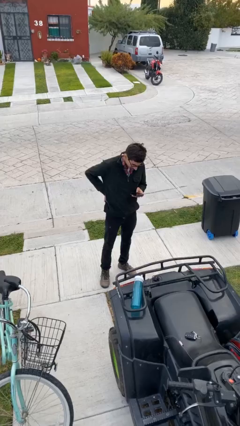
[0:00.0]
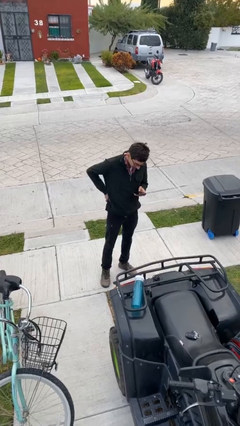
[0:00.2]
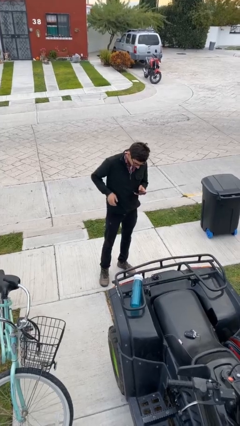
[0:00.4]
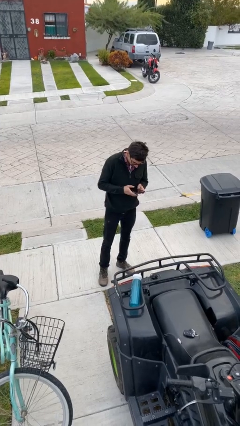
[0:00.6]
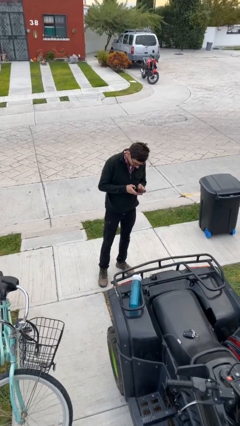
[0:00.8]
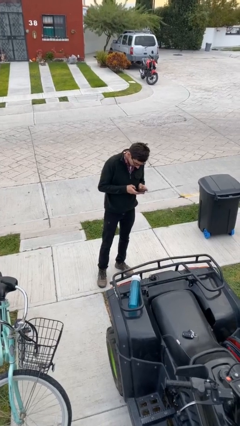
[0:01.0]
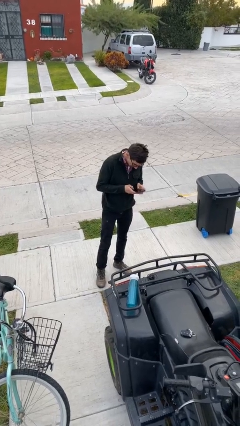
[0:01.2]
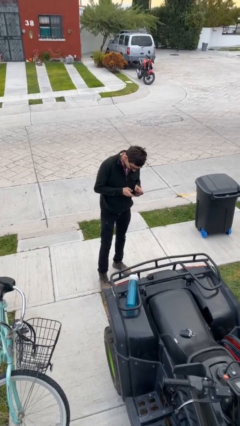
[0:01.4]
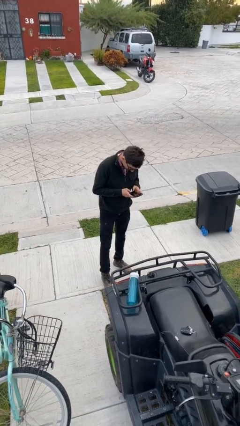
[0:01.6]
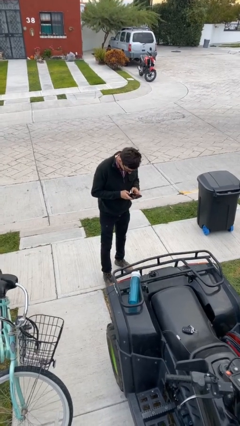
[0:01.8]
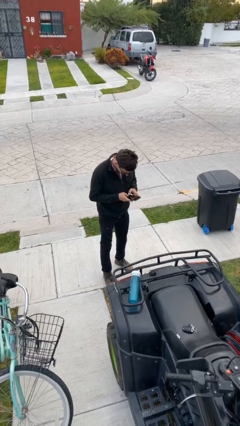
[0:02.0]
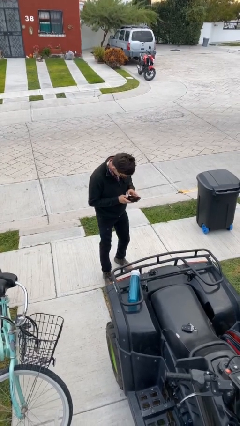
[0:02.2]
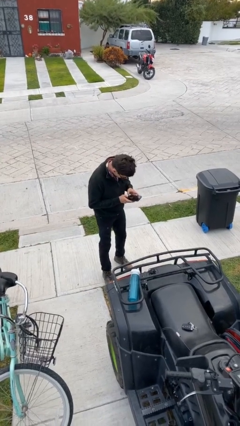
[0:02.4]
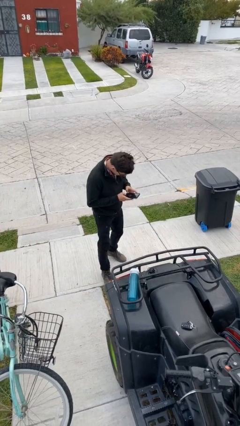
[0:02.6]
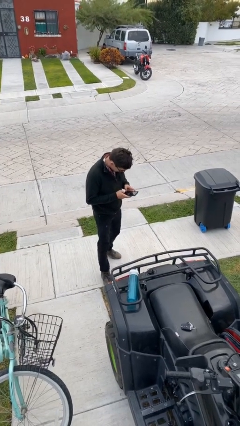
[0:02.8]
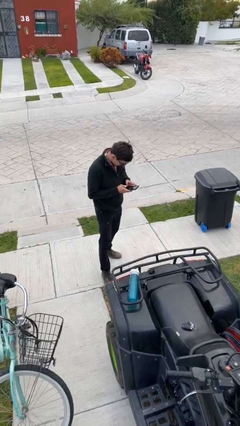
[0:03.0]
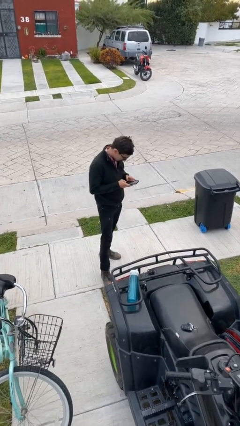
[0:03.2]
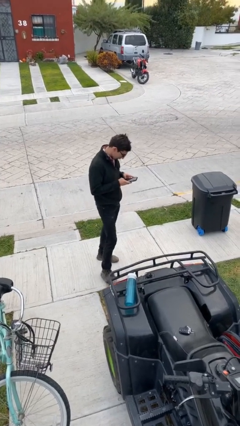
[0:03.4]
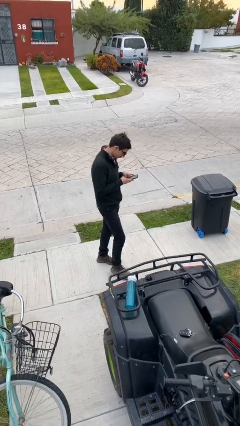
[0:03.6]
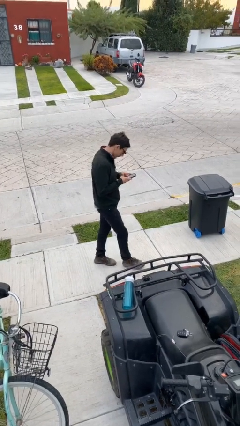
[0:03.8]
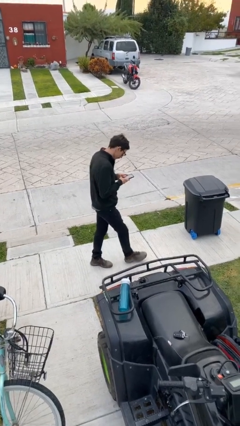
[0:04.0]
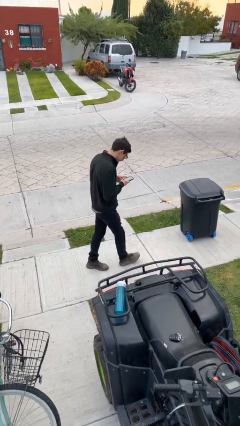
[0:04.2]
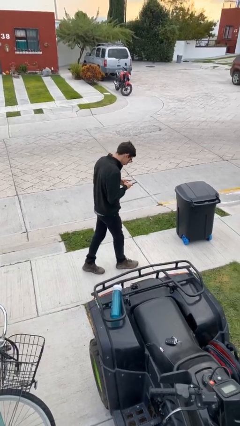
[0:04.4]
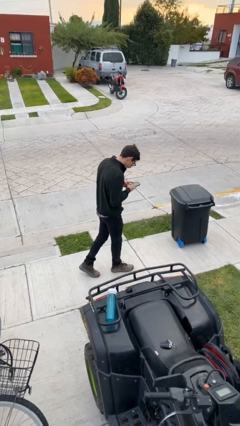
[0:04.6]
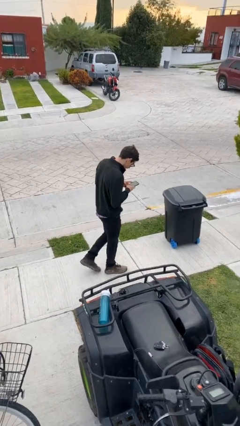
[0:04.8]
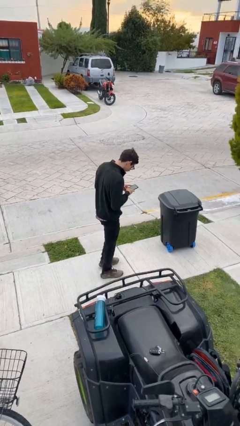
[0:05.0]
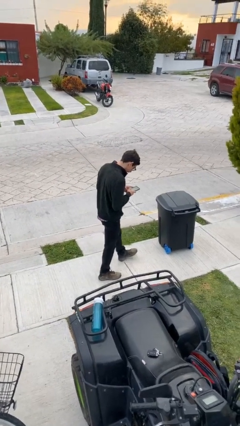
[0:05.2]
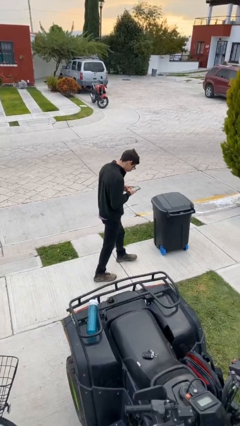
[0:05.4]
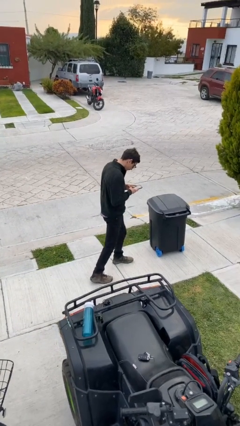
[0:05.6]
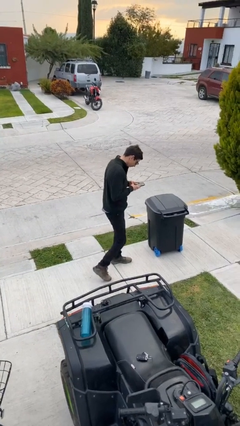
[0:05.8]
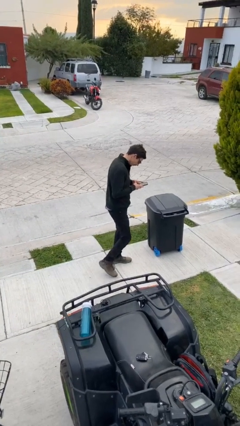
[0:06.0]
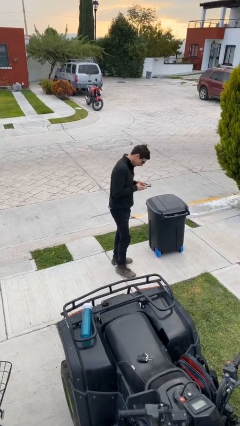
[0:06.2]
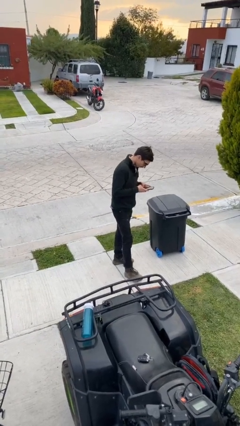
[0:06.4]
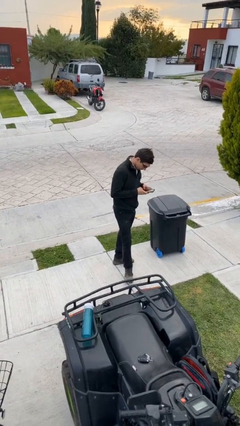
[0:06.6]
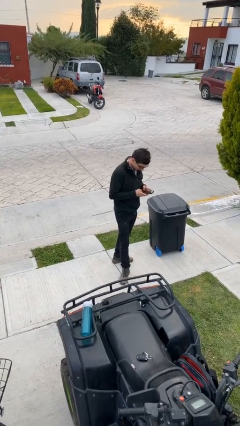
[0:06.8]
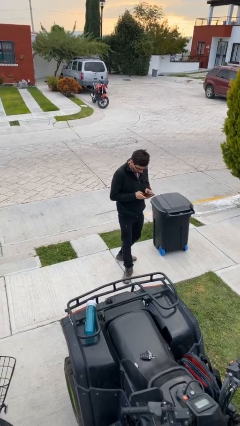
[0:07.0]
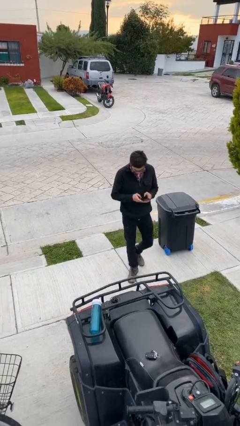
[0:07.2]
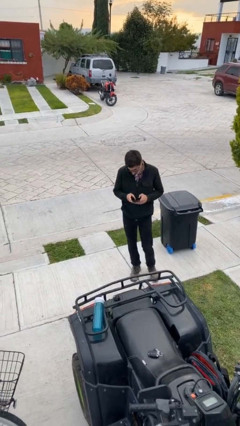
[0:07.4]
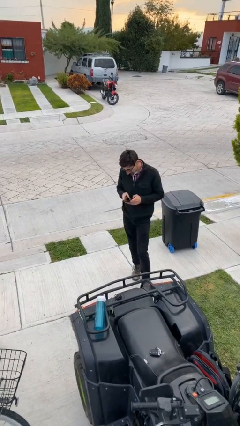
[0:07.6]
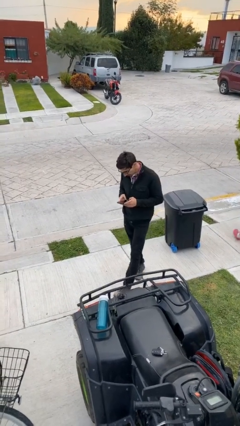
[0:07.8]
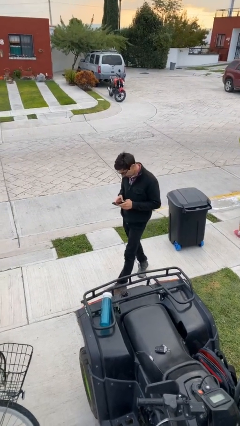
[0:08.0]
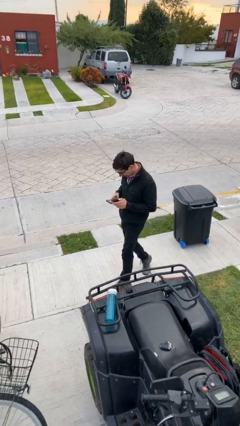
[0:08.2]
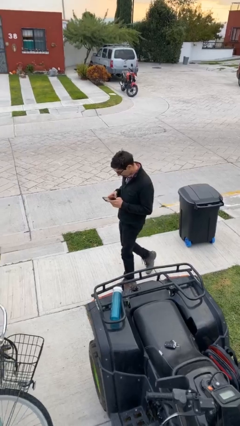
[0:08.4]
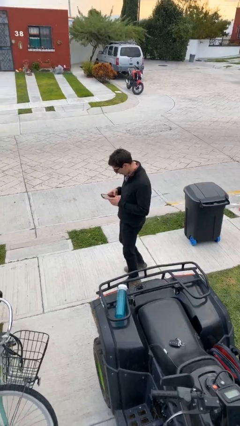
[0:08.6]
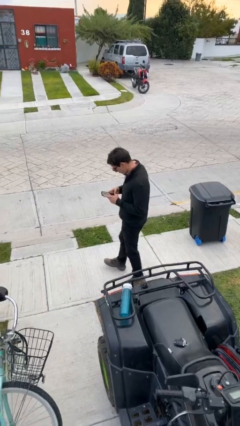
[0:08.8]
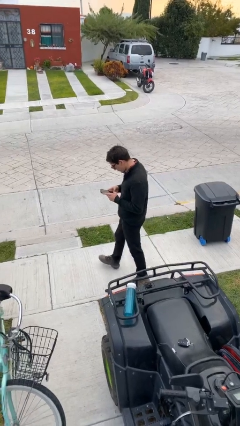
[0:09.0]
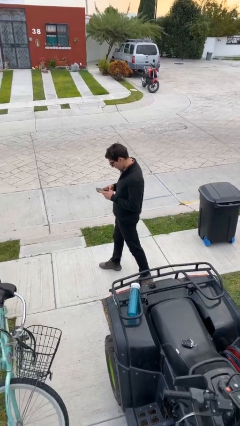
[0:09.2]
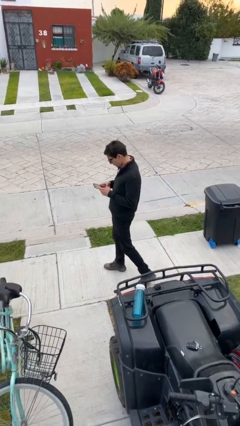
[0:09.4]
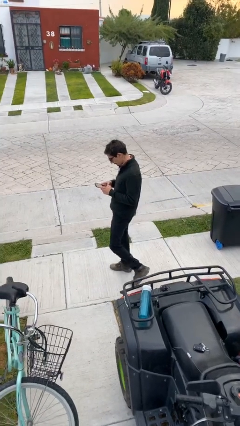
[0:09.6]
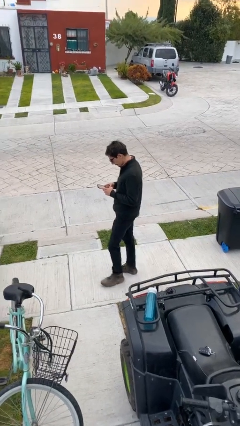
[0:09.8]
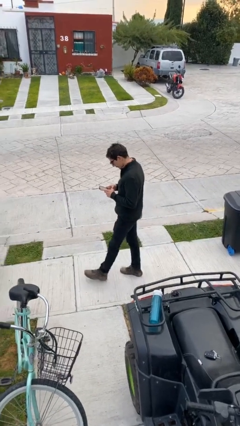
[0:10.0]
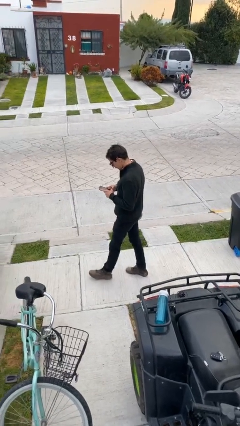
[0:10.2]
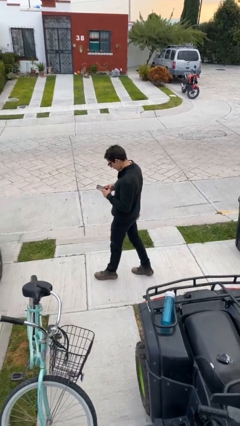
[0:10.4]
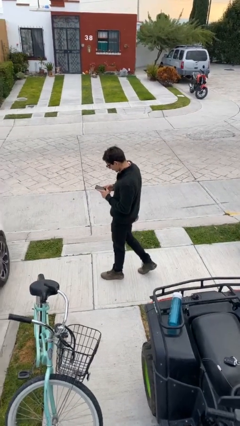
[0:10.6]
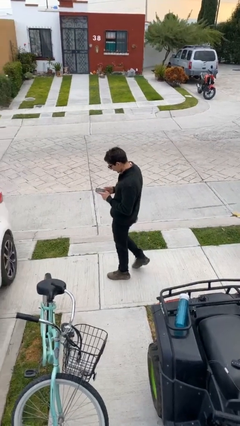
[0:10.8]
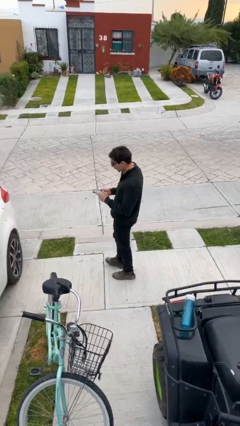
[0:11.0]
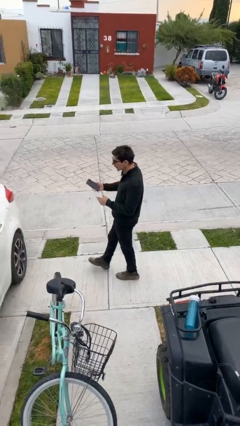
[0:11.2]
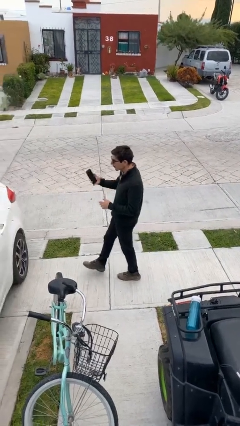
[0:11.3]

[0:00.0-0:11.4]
person texts on phone

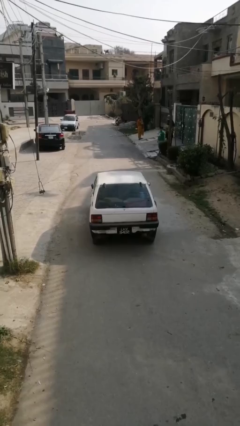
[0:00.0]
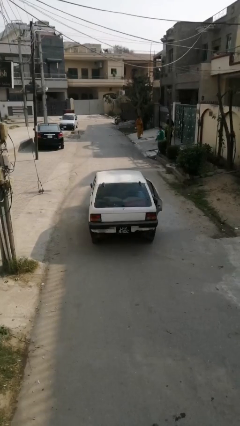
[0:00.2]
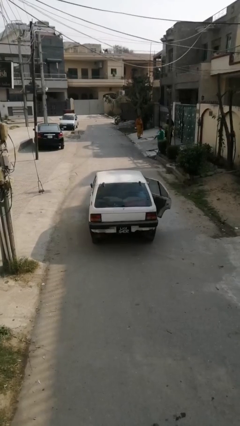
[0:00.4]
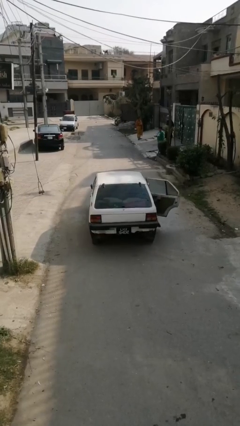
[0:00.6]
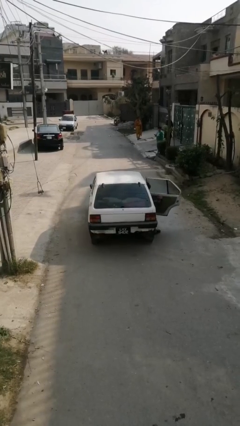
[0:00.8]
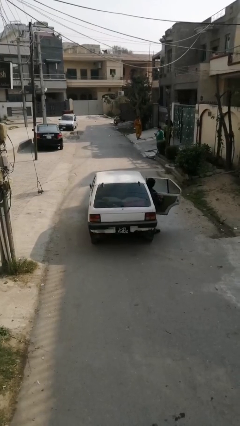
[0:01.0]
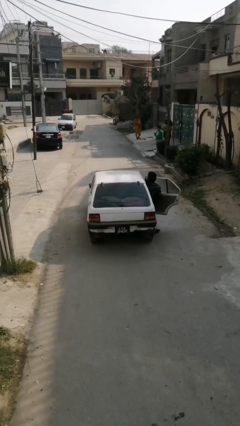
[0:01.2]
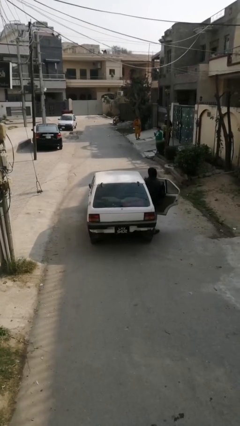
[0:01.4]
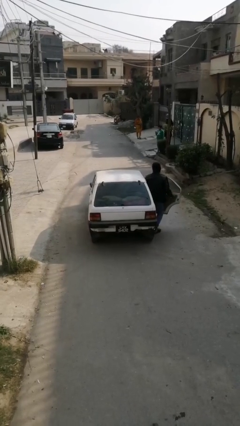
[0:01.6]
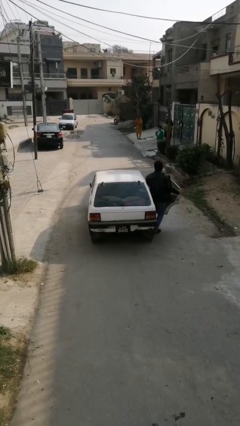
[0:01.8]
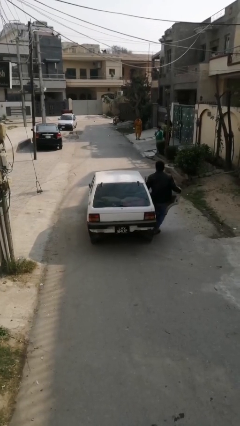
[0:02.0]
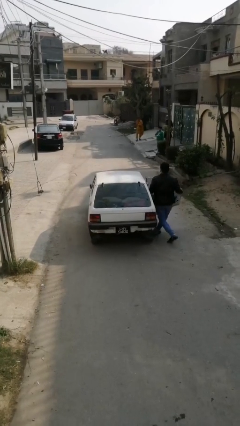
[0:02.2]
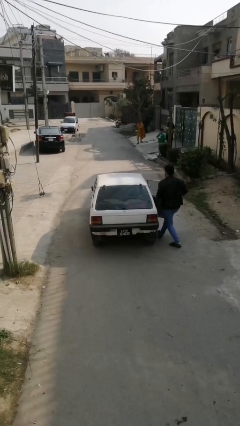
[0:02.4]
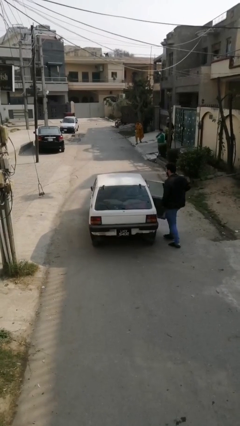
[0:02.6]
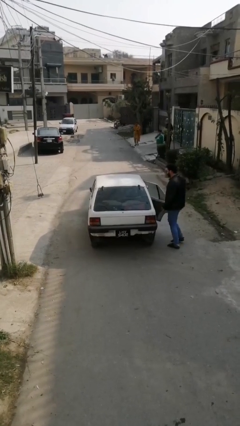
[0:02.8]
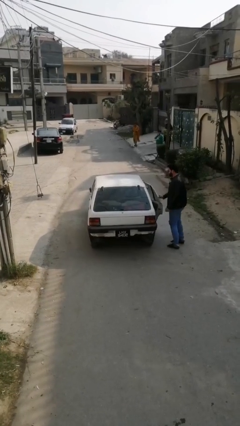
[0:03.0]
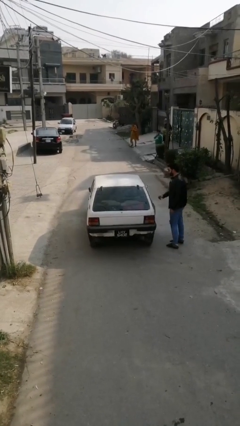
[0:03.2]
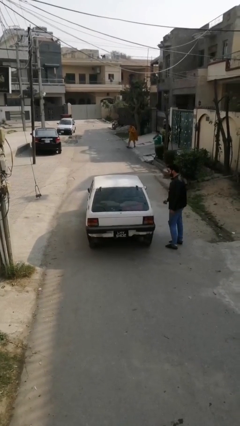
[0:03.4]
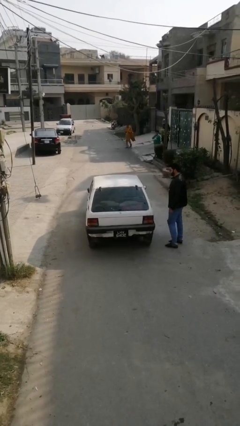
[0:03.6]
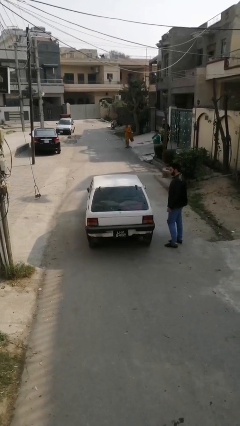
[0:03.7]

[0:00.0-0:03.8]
car drops off person

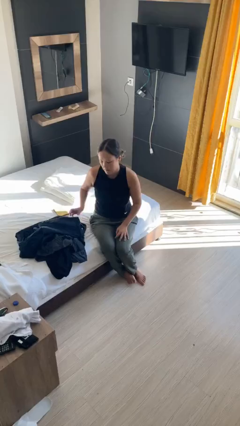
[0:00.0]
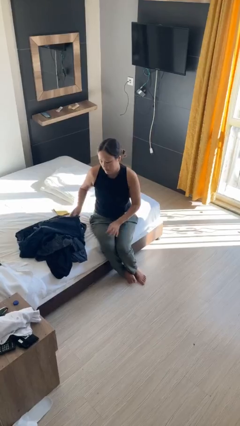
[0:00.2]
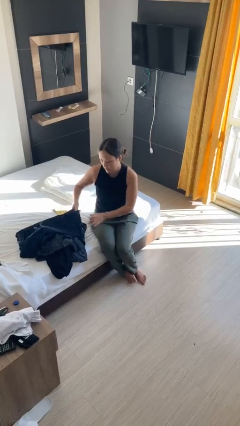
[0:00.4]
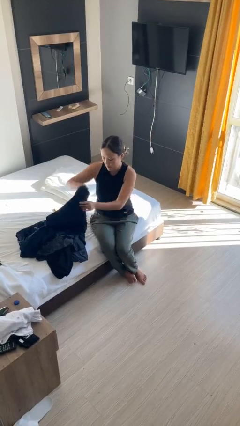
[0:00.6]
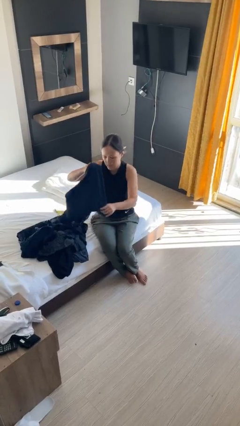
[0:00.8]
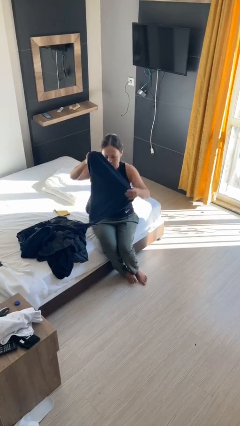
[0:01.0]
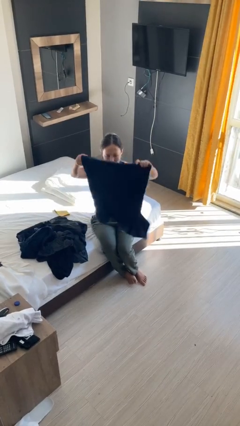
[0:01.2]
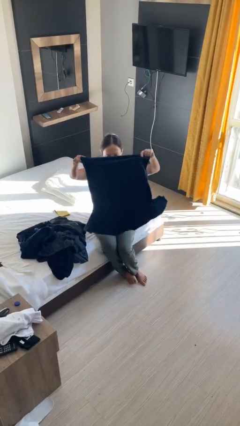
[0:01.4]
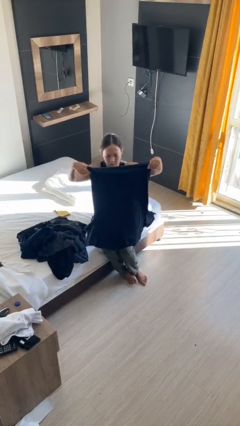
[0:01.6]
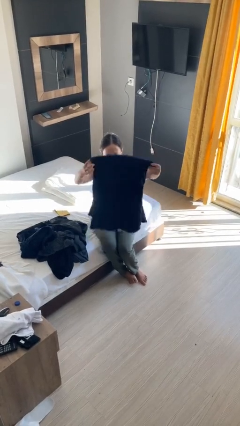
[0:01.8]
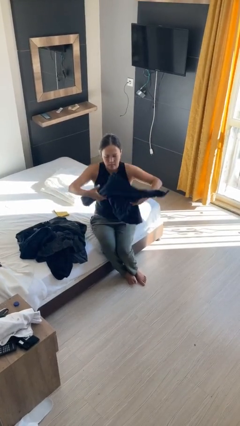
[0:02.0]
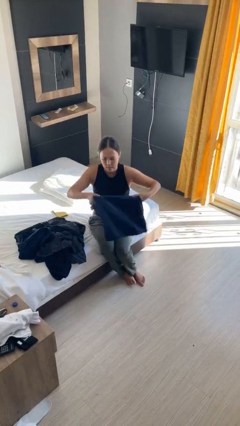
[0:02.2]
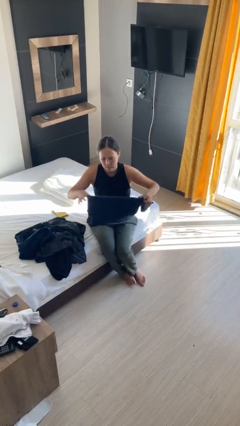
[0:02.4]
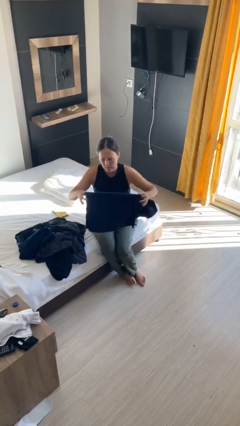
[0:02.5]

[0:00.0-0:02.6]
person folds shirt
